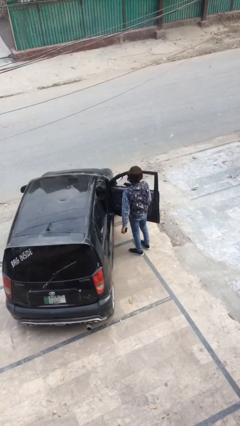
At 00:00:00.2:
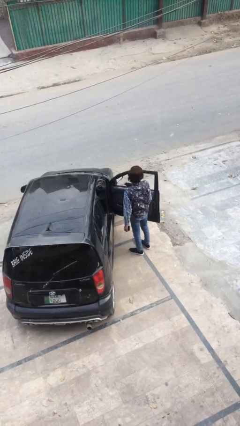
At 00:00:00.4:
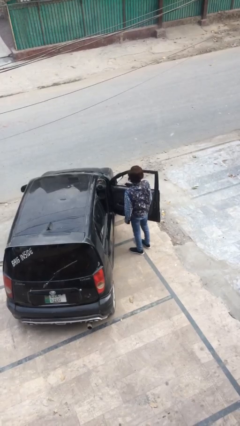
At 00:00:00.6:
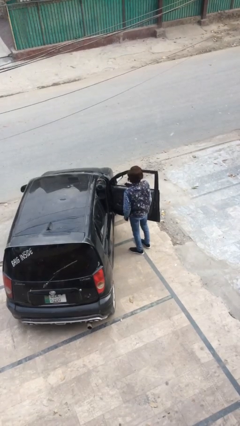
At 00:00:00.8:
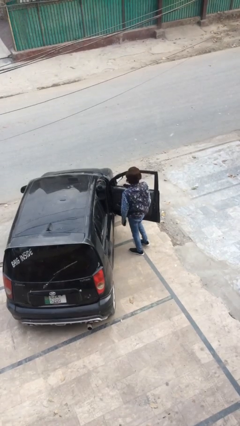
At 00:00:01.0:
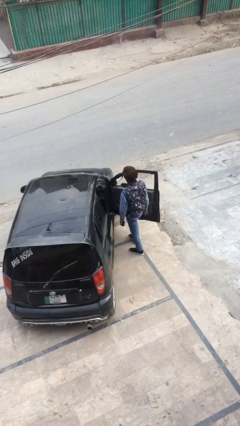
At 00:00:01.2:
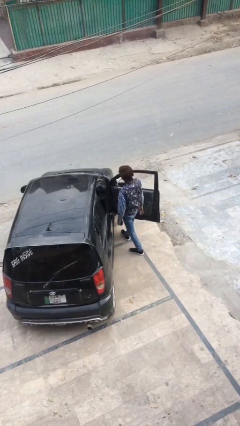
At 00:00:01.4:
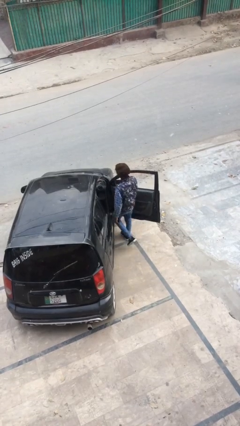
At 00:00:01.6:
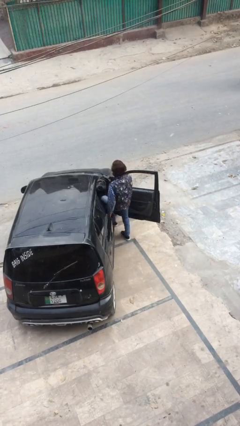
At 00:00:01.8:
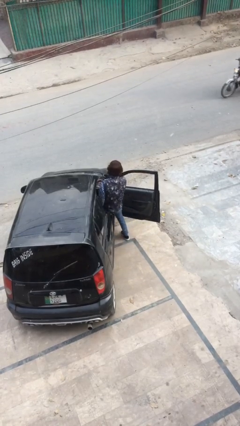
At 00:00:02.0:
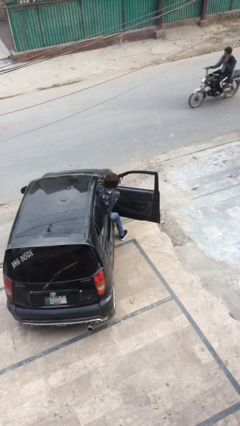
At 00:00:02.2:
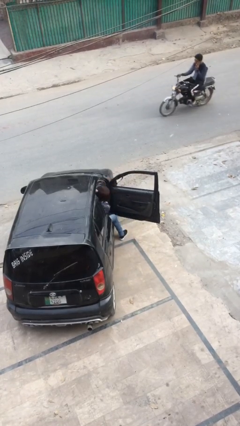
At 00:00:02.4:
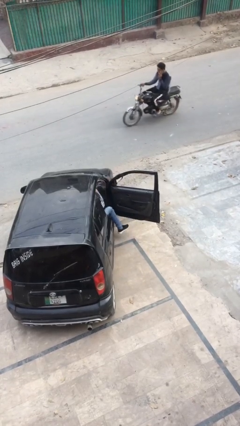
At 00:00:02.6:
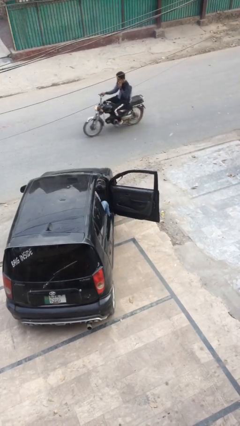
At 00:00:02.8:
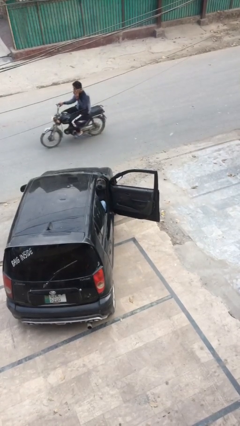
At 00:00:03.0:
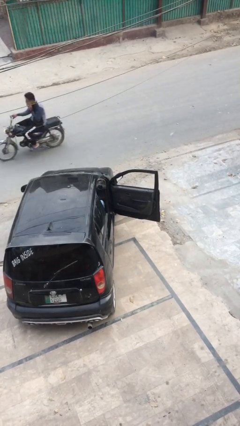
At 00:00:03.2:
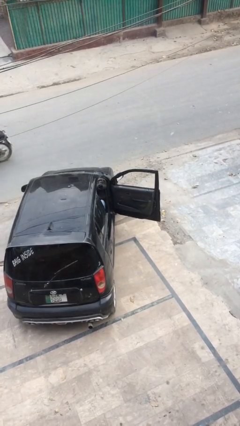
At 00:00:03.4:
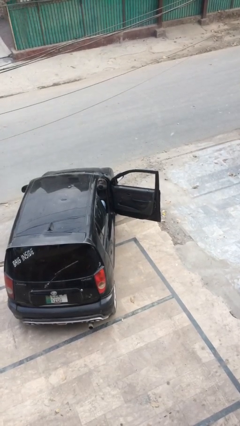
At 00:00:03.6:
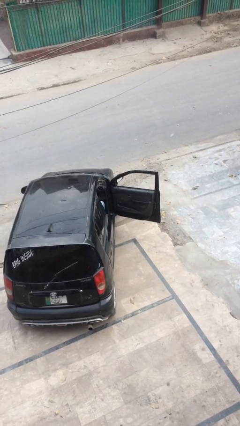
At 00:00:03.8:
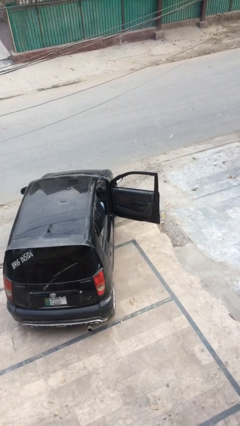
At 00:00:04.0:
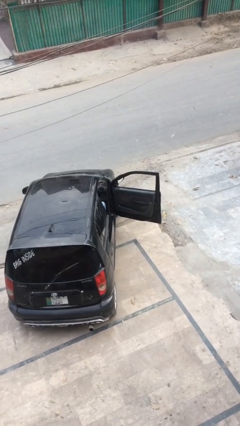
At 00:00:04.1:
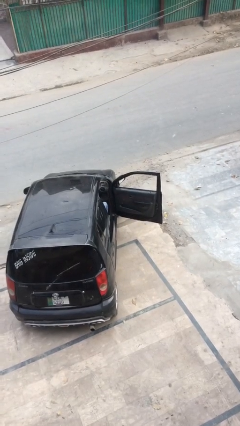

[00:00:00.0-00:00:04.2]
person enters car

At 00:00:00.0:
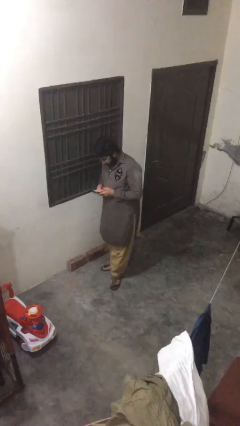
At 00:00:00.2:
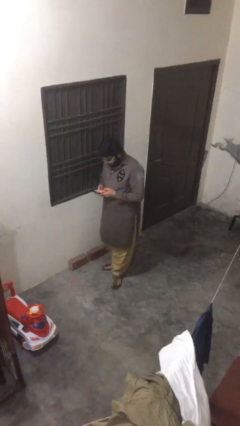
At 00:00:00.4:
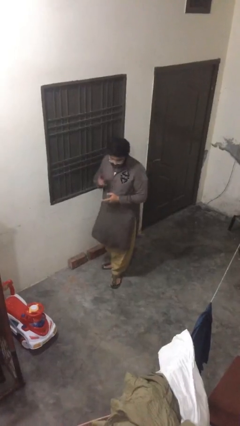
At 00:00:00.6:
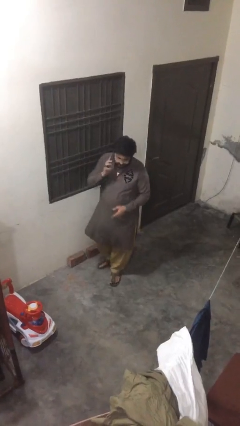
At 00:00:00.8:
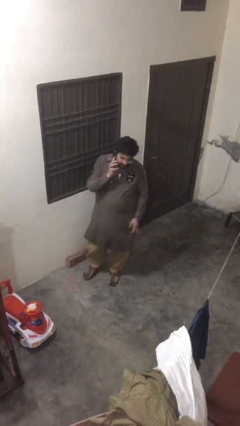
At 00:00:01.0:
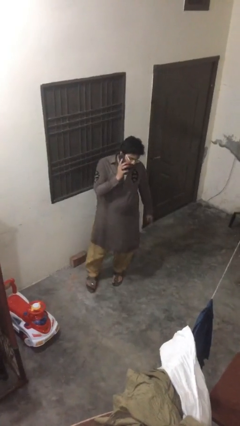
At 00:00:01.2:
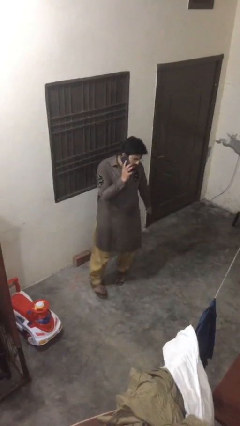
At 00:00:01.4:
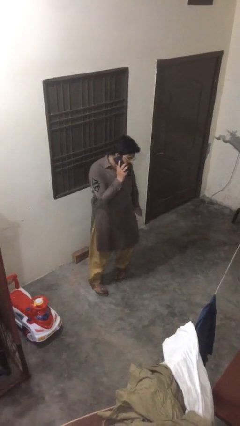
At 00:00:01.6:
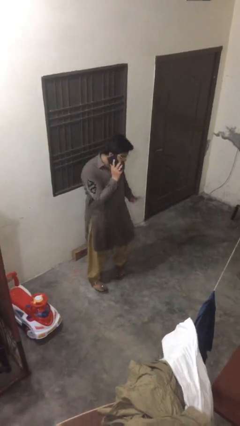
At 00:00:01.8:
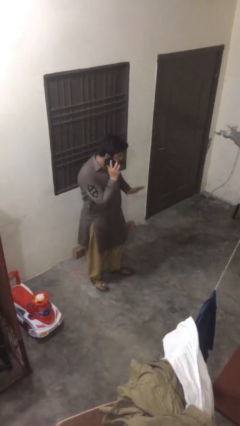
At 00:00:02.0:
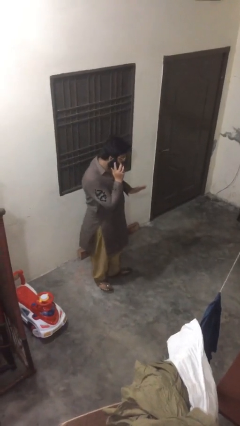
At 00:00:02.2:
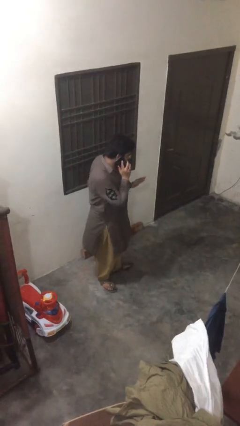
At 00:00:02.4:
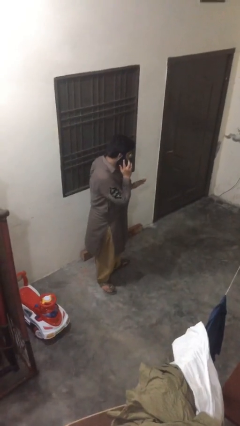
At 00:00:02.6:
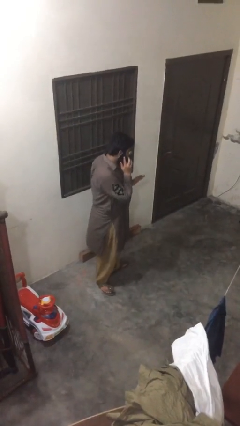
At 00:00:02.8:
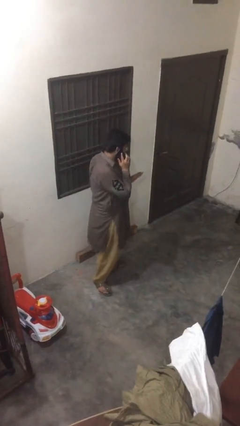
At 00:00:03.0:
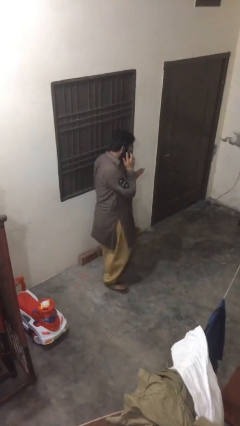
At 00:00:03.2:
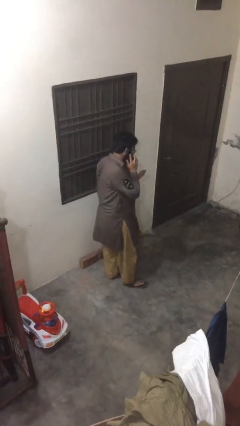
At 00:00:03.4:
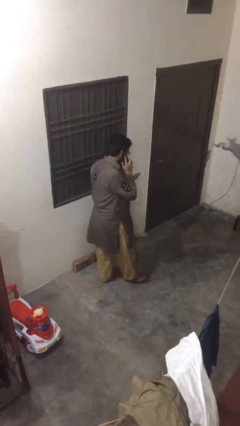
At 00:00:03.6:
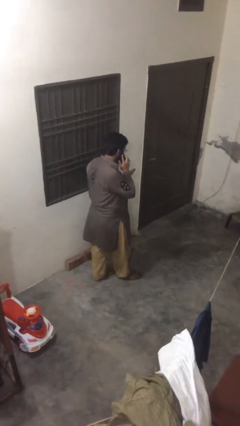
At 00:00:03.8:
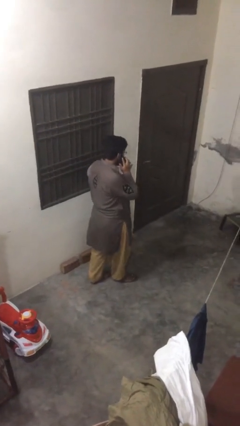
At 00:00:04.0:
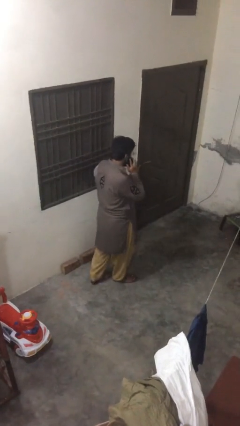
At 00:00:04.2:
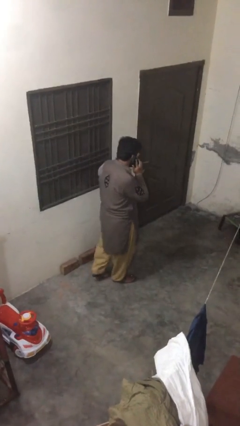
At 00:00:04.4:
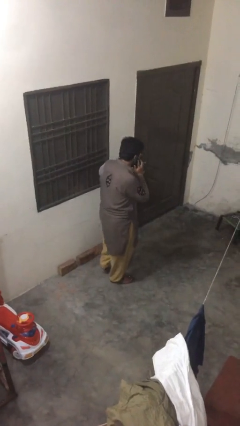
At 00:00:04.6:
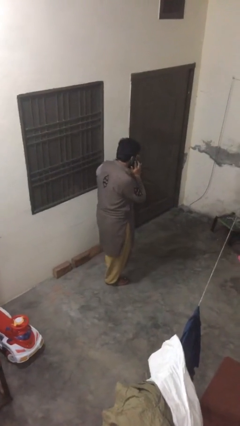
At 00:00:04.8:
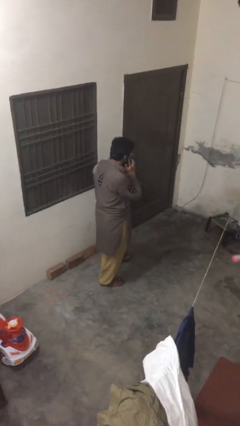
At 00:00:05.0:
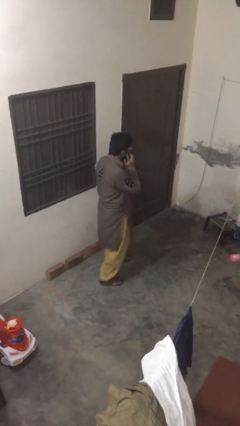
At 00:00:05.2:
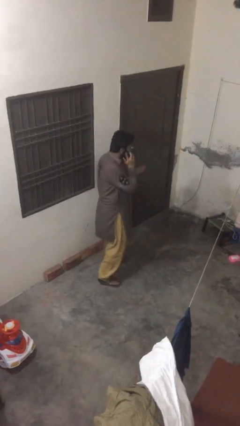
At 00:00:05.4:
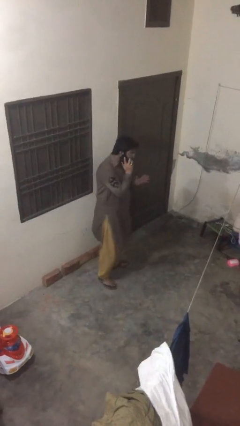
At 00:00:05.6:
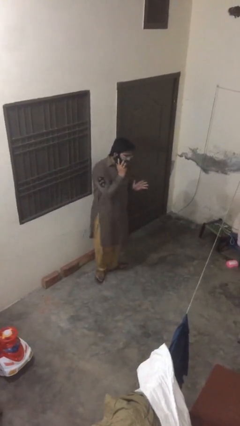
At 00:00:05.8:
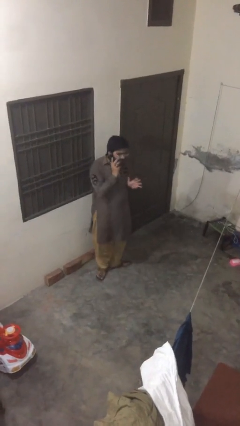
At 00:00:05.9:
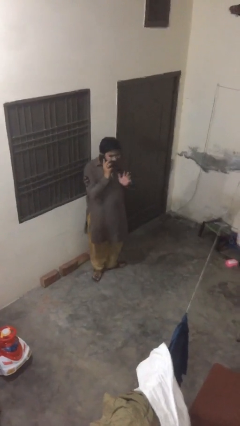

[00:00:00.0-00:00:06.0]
person talks on phone

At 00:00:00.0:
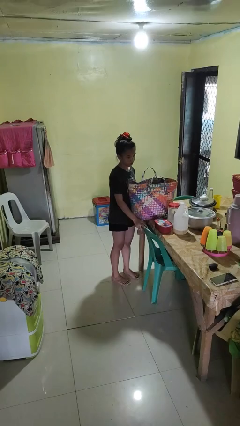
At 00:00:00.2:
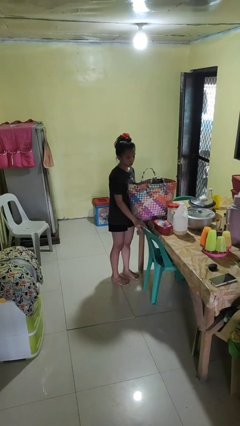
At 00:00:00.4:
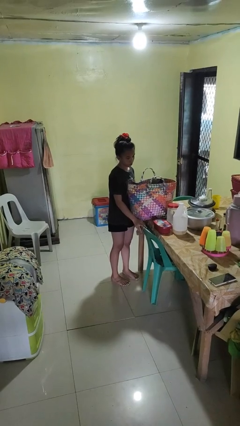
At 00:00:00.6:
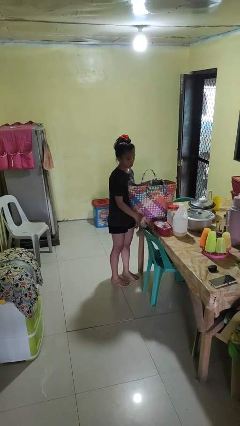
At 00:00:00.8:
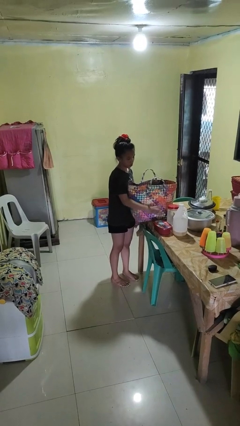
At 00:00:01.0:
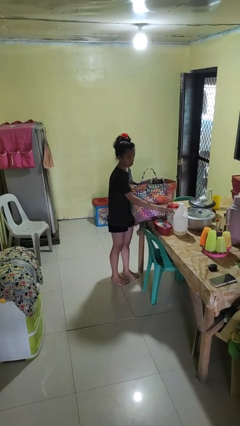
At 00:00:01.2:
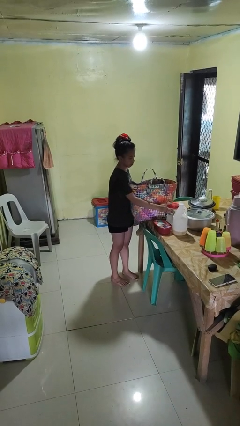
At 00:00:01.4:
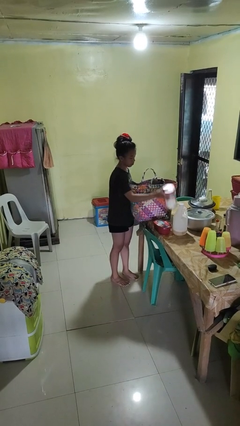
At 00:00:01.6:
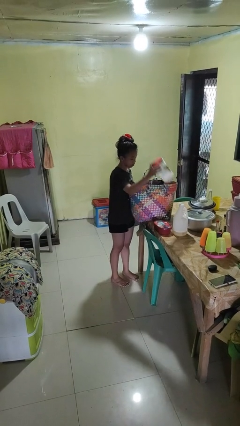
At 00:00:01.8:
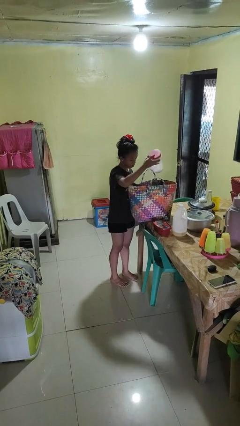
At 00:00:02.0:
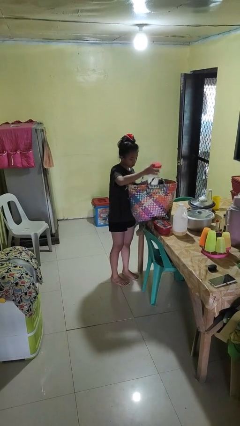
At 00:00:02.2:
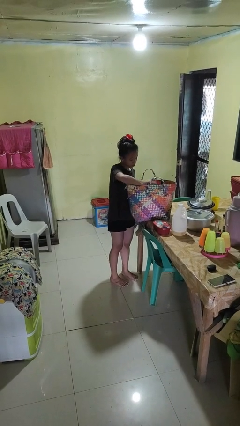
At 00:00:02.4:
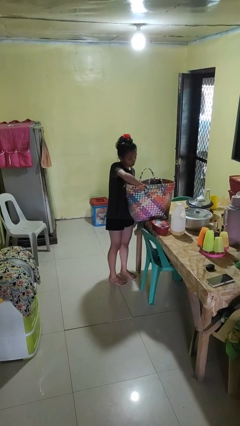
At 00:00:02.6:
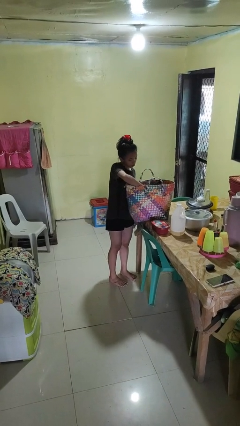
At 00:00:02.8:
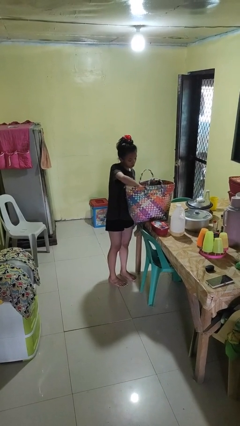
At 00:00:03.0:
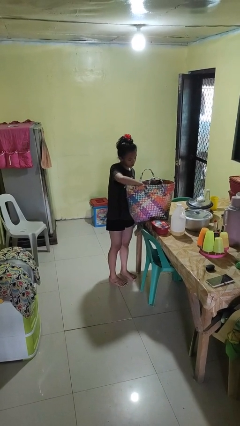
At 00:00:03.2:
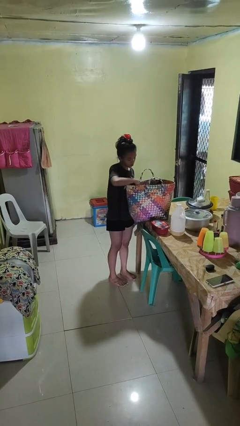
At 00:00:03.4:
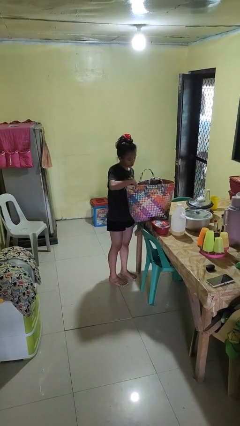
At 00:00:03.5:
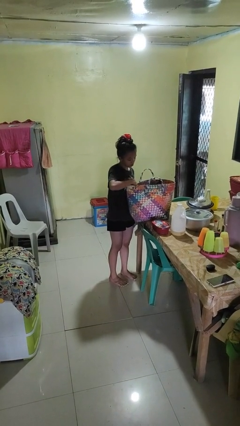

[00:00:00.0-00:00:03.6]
person puts object into basket

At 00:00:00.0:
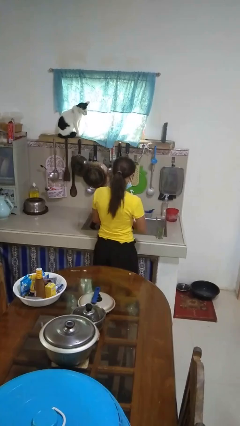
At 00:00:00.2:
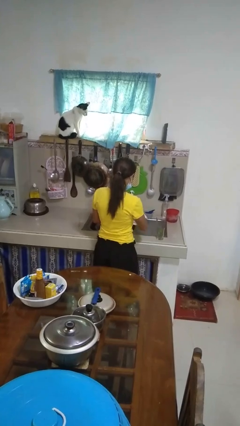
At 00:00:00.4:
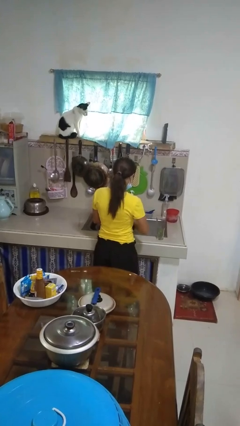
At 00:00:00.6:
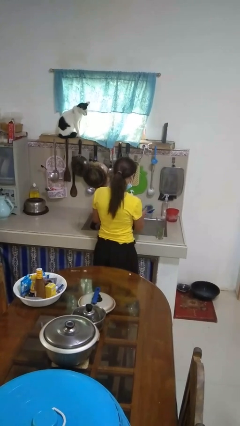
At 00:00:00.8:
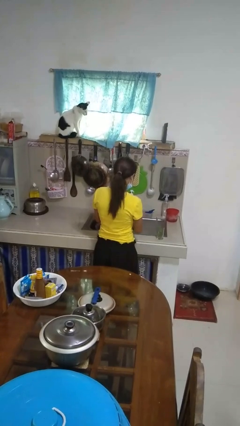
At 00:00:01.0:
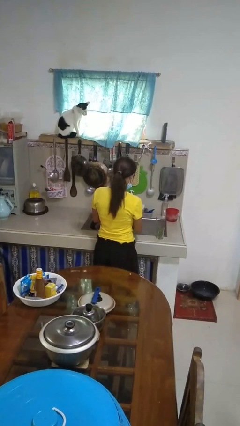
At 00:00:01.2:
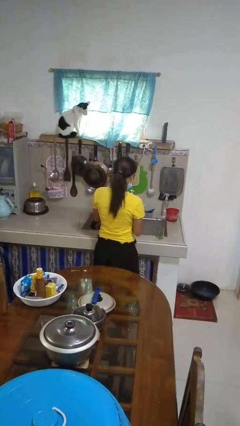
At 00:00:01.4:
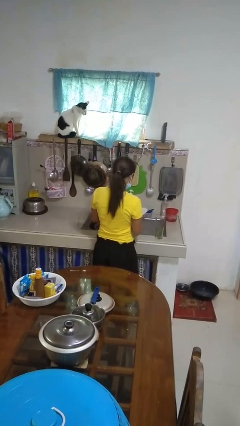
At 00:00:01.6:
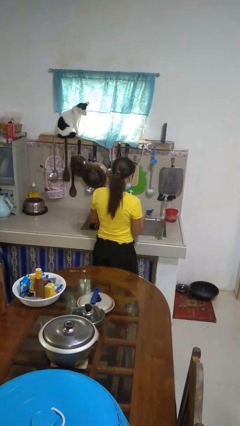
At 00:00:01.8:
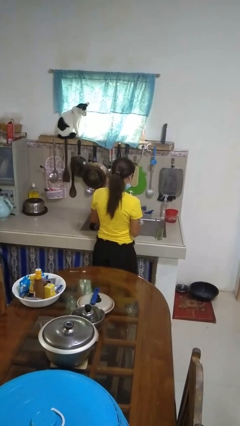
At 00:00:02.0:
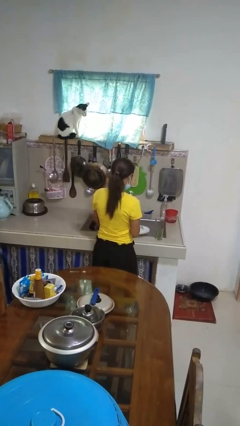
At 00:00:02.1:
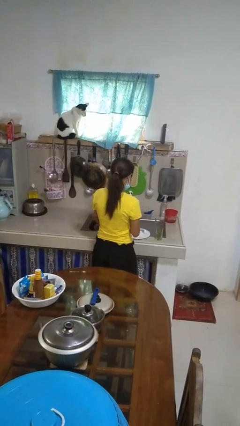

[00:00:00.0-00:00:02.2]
person dries dish

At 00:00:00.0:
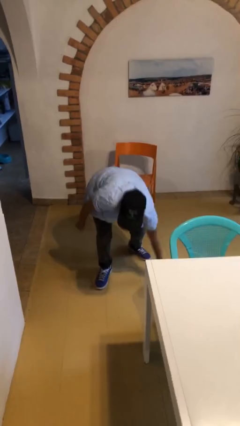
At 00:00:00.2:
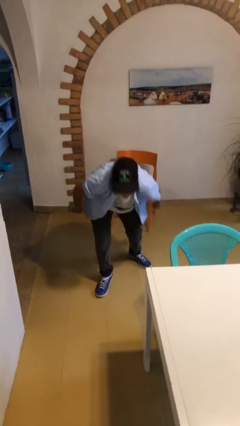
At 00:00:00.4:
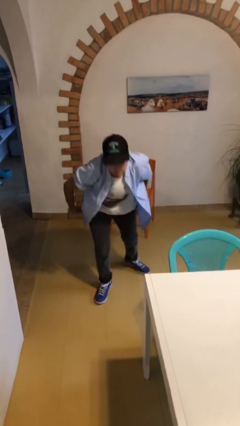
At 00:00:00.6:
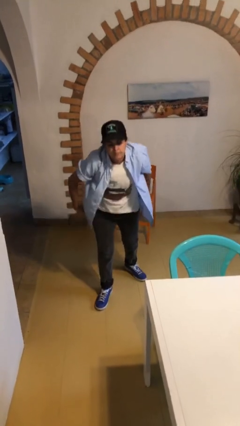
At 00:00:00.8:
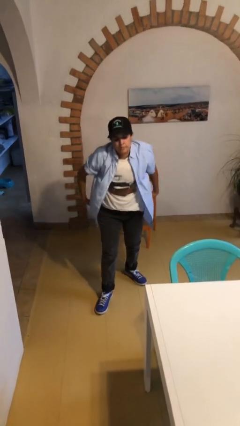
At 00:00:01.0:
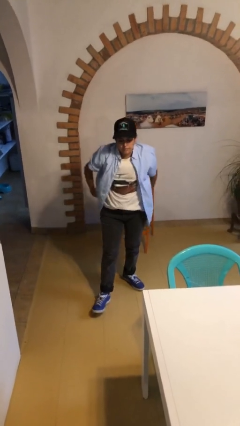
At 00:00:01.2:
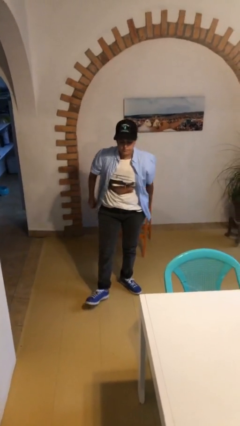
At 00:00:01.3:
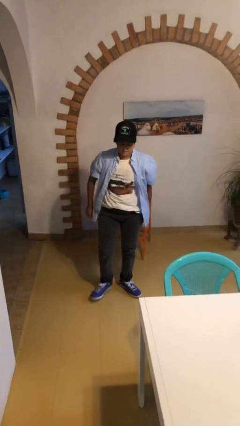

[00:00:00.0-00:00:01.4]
person stands up from floor

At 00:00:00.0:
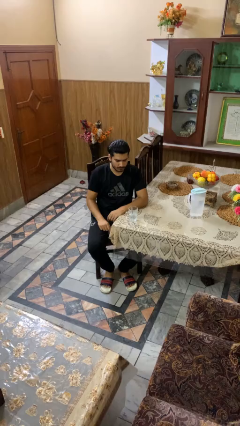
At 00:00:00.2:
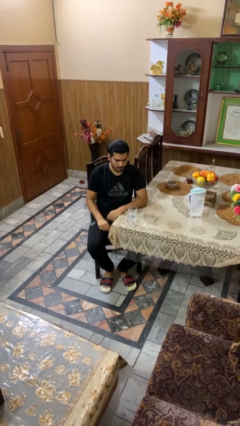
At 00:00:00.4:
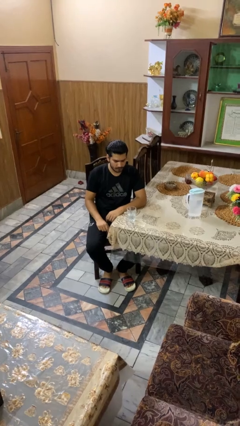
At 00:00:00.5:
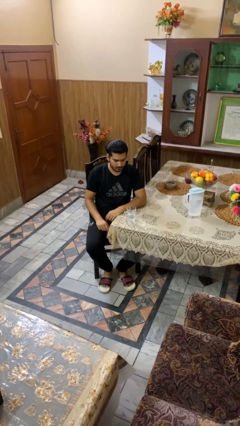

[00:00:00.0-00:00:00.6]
person stirs mug
